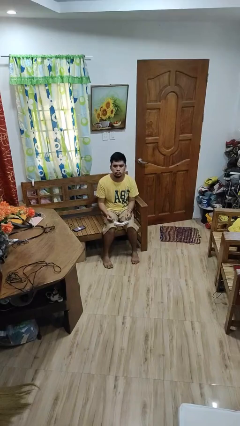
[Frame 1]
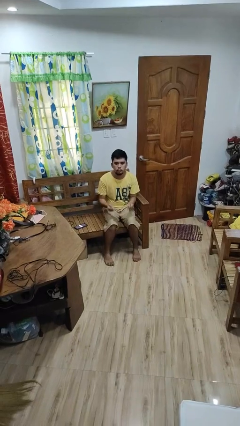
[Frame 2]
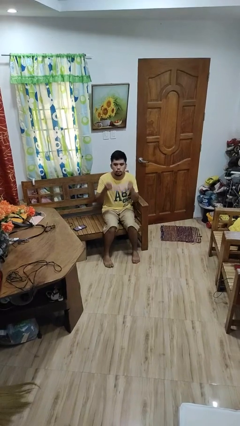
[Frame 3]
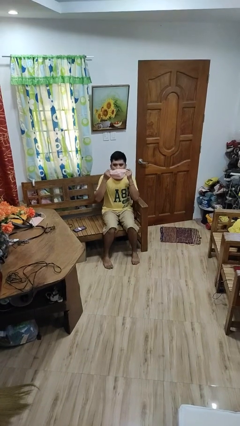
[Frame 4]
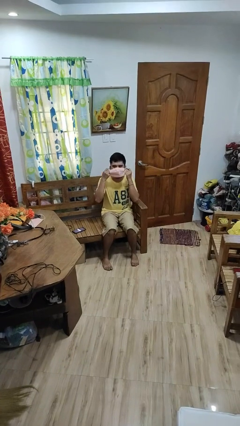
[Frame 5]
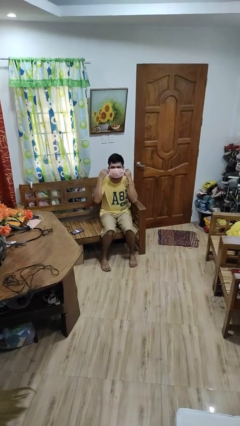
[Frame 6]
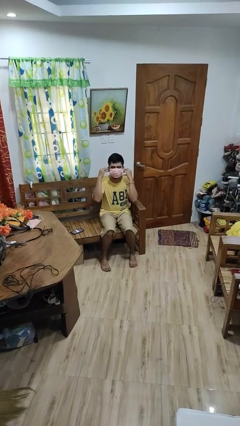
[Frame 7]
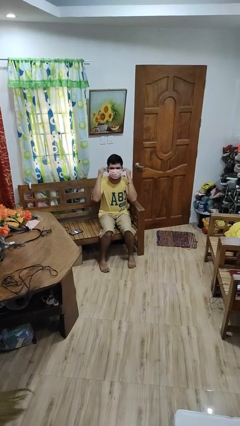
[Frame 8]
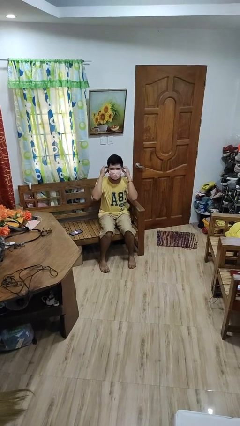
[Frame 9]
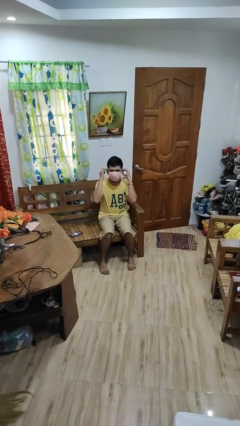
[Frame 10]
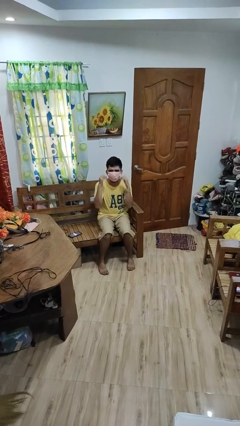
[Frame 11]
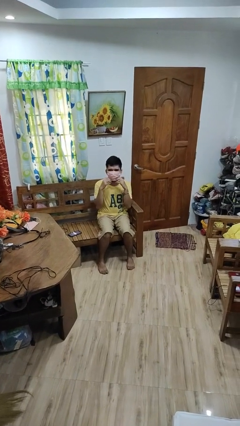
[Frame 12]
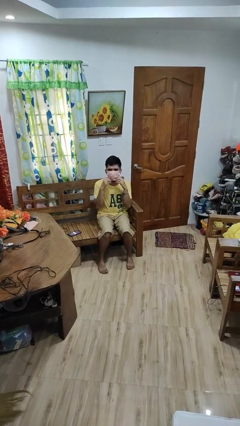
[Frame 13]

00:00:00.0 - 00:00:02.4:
person puts on facemask

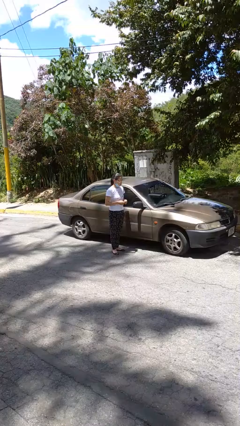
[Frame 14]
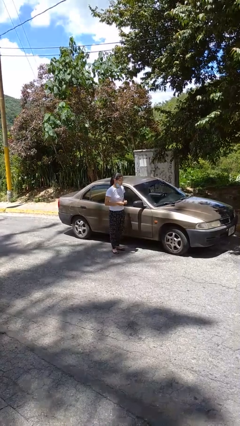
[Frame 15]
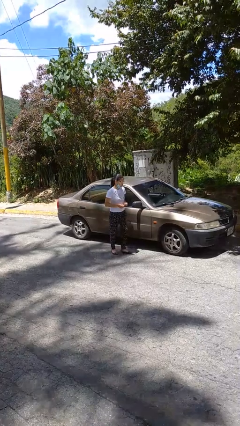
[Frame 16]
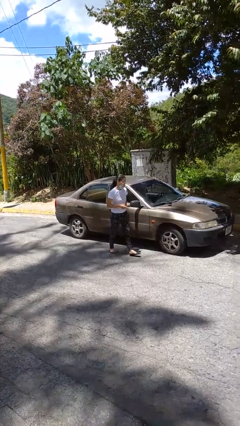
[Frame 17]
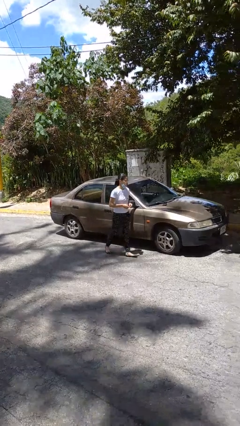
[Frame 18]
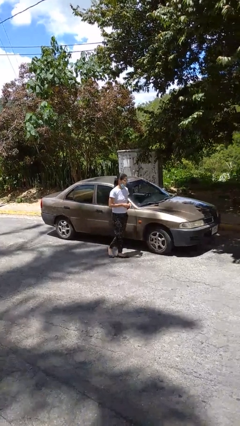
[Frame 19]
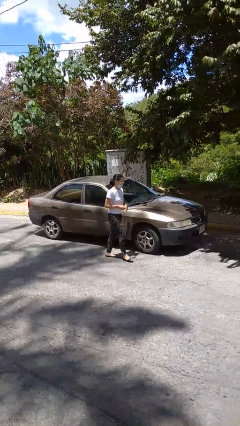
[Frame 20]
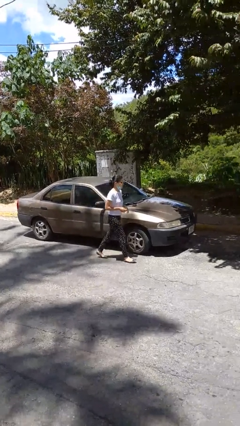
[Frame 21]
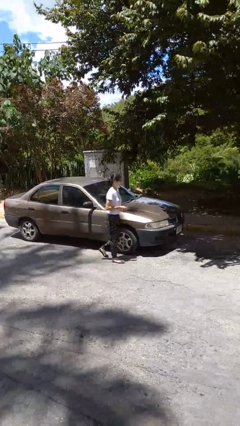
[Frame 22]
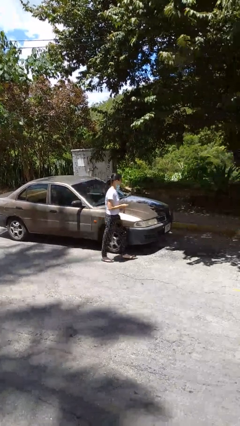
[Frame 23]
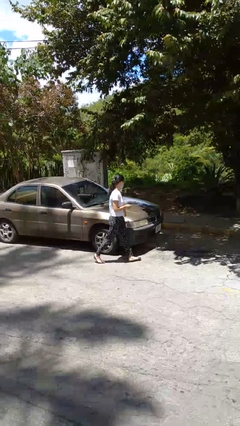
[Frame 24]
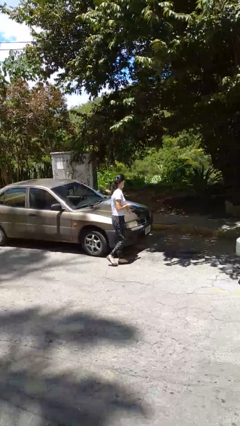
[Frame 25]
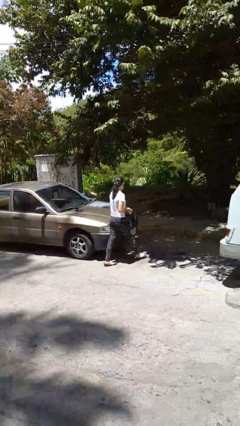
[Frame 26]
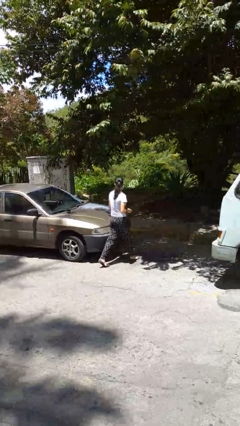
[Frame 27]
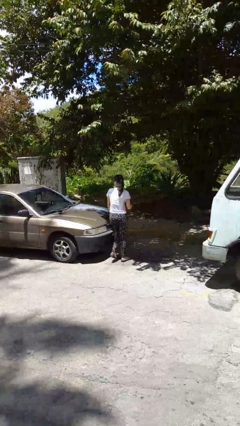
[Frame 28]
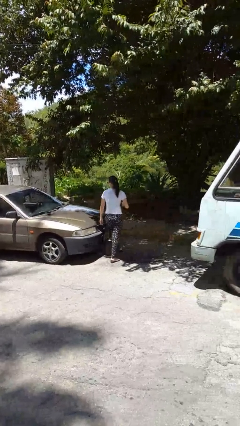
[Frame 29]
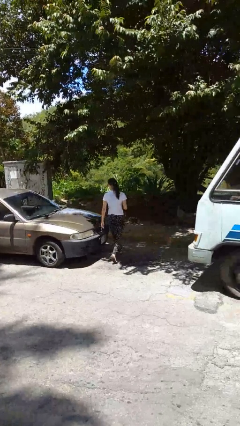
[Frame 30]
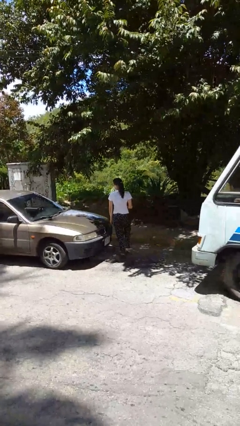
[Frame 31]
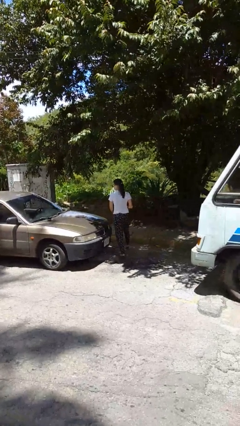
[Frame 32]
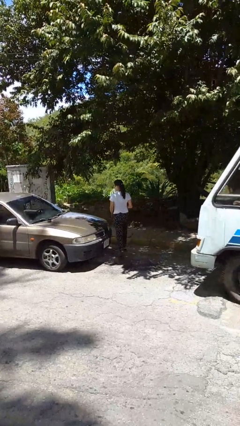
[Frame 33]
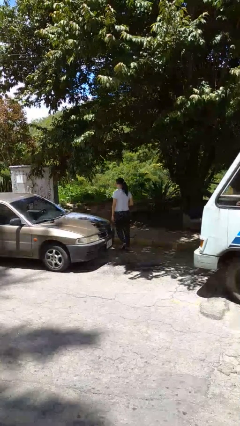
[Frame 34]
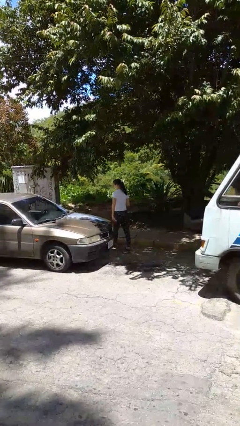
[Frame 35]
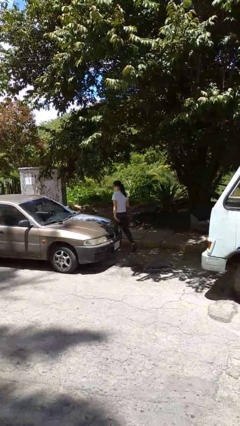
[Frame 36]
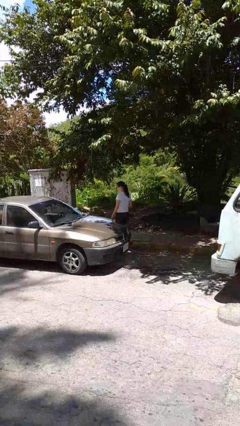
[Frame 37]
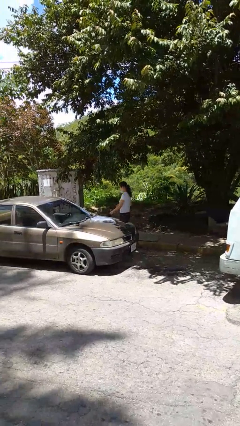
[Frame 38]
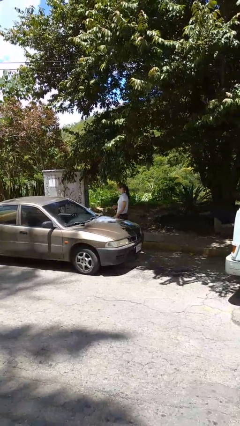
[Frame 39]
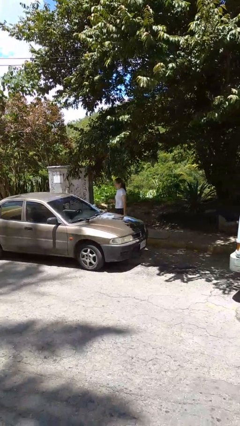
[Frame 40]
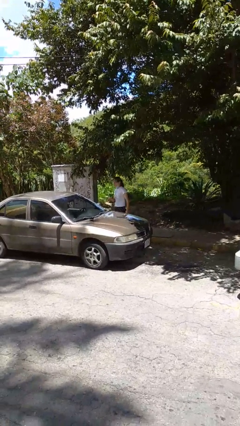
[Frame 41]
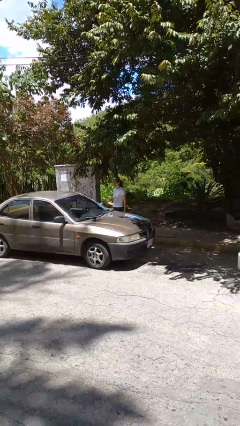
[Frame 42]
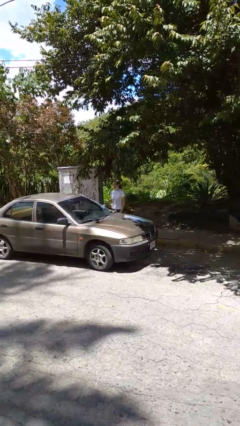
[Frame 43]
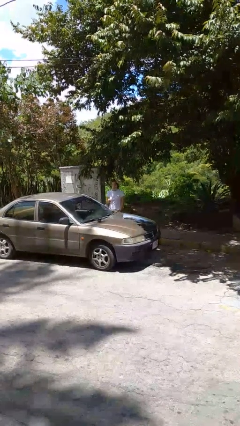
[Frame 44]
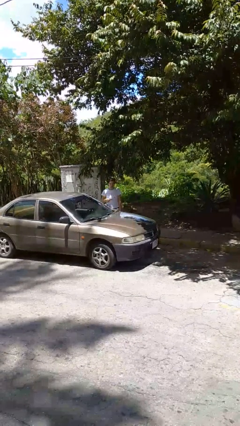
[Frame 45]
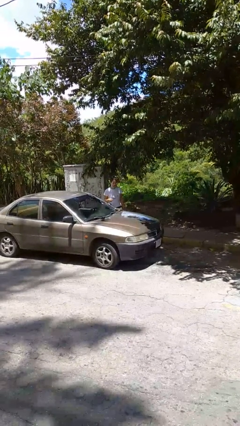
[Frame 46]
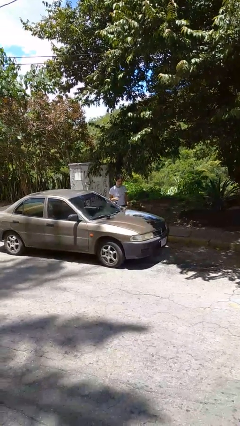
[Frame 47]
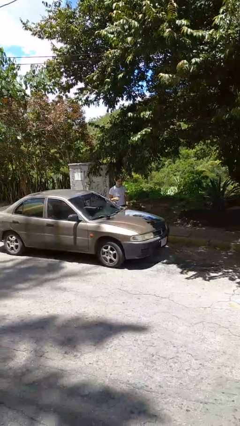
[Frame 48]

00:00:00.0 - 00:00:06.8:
person walks around car

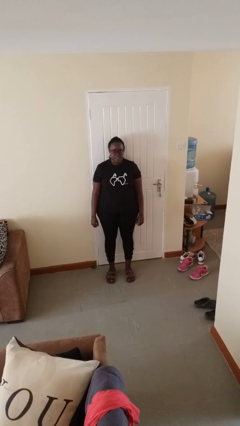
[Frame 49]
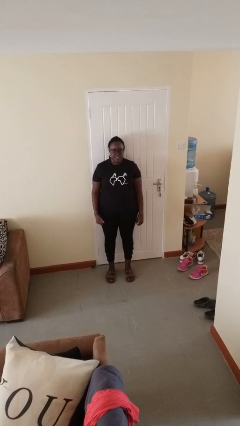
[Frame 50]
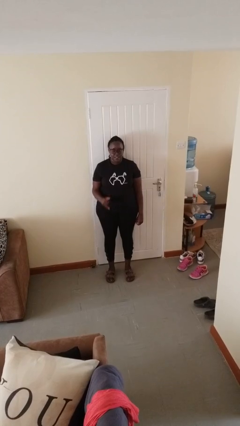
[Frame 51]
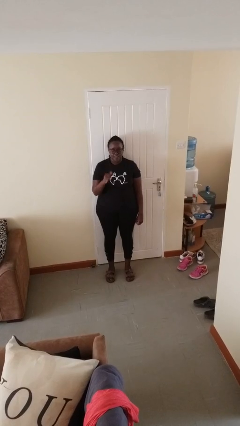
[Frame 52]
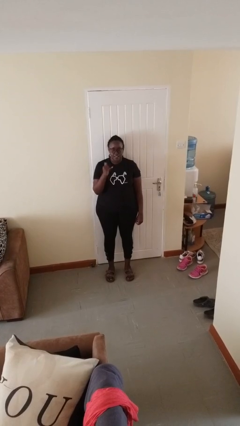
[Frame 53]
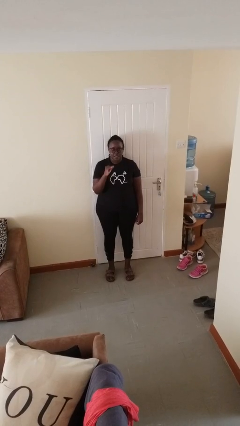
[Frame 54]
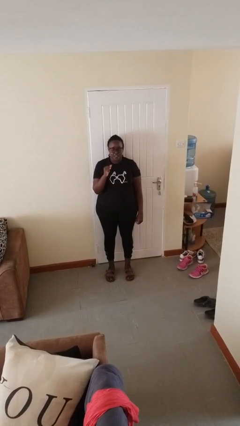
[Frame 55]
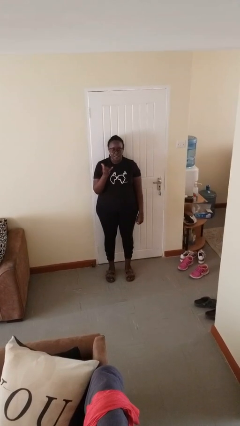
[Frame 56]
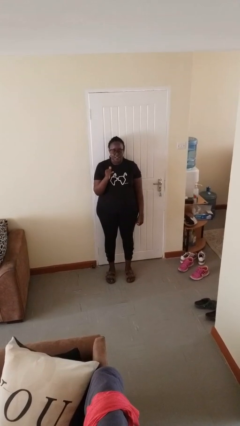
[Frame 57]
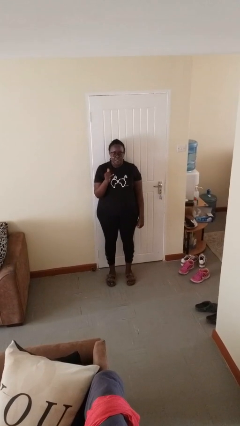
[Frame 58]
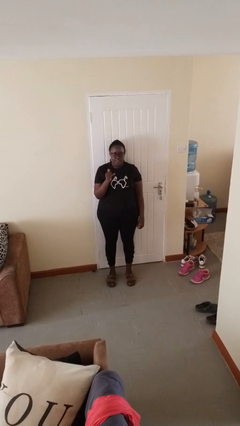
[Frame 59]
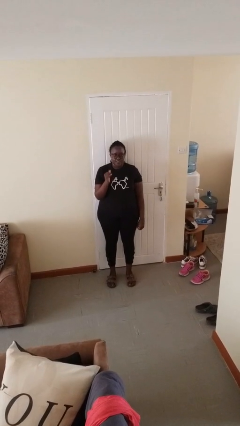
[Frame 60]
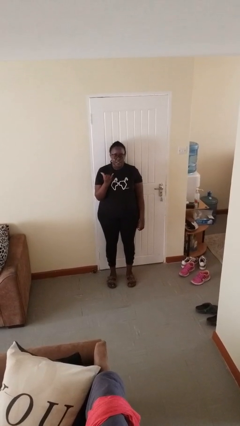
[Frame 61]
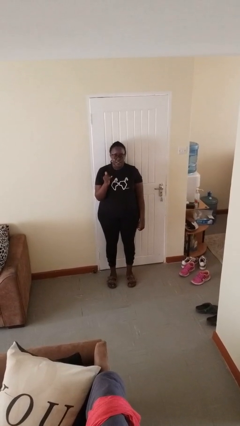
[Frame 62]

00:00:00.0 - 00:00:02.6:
person gestures hang loose

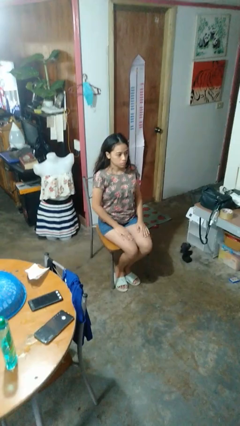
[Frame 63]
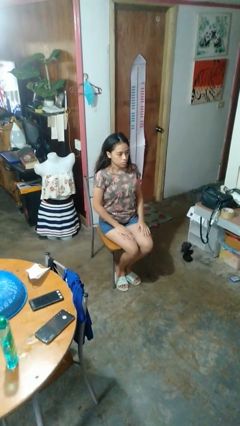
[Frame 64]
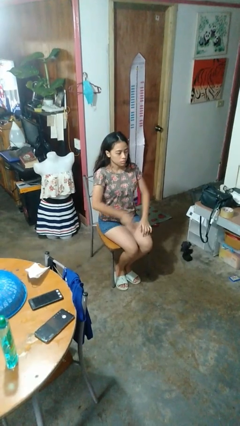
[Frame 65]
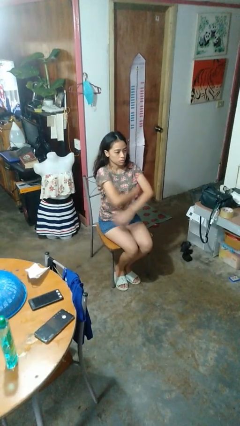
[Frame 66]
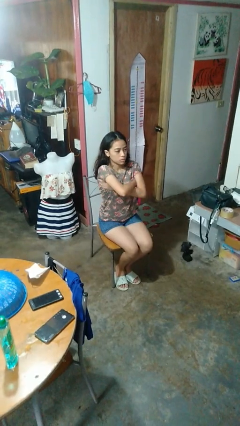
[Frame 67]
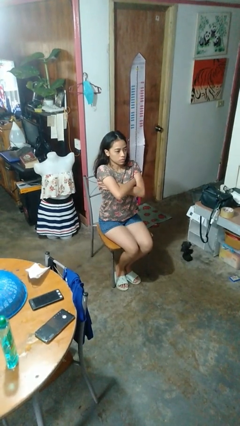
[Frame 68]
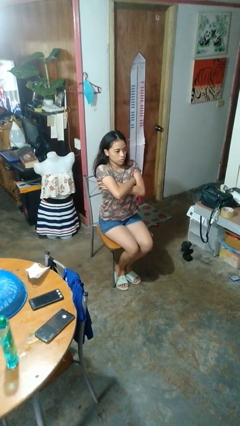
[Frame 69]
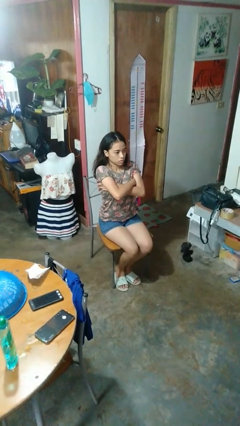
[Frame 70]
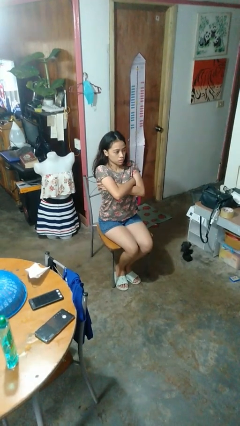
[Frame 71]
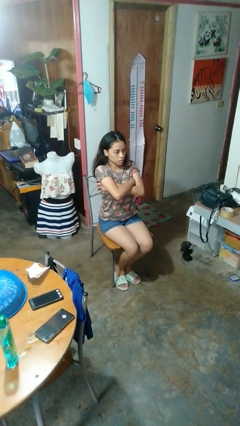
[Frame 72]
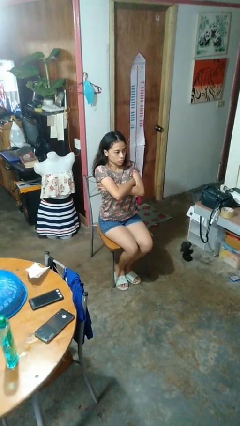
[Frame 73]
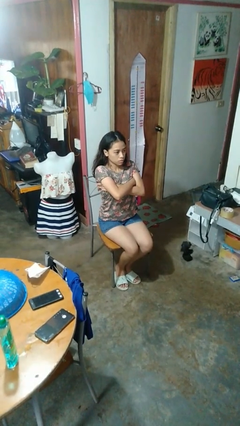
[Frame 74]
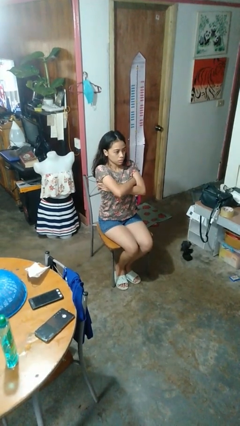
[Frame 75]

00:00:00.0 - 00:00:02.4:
person crosses arms

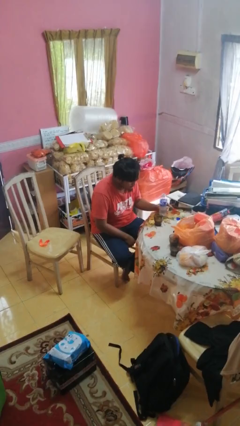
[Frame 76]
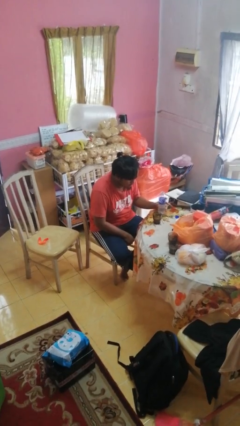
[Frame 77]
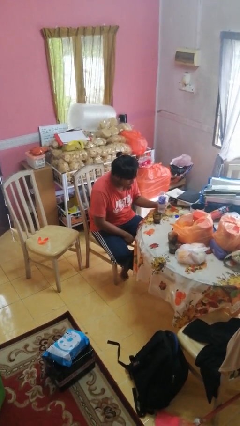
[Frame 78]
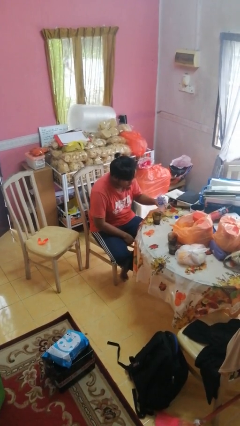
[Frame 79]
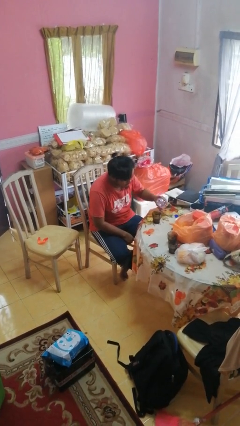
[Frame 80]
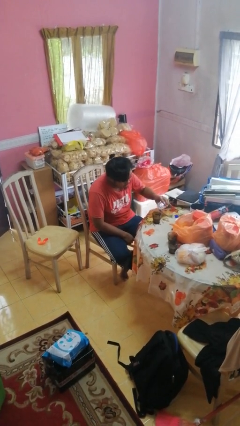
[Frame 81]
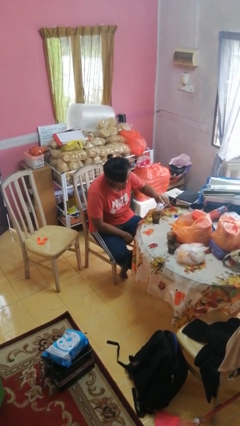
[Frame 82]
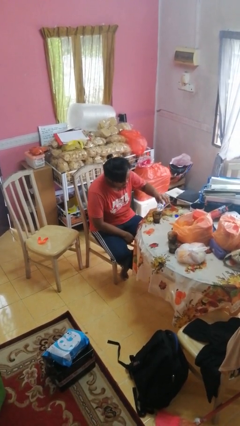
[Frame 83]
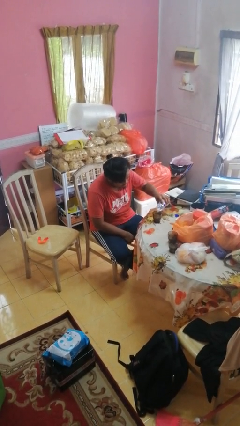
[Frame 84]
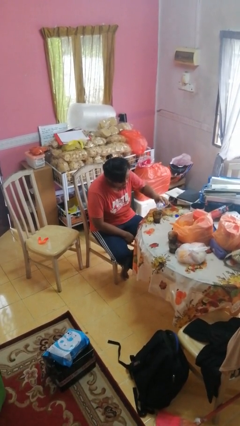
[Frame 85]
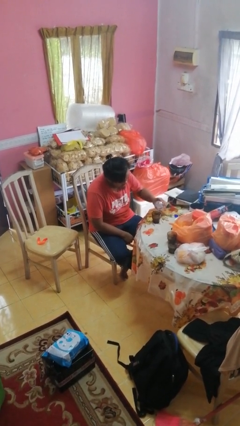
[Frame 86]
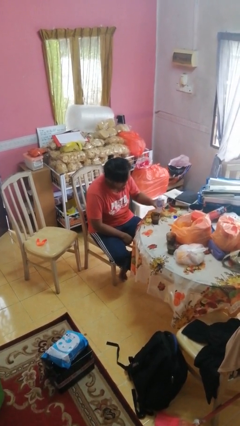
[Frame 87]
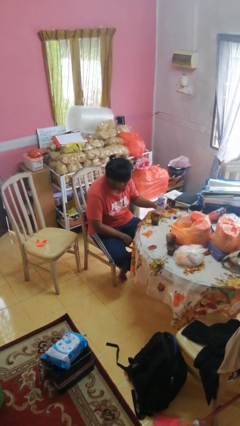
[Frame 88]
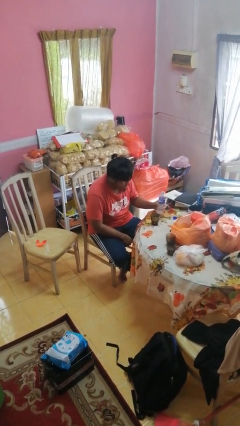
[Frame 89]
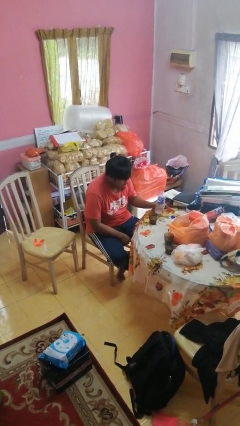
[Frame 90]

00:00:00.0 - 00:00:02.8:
person pours liquid into cup

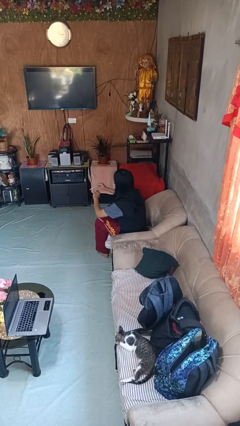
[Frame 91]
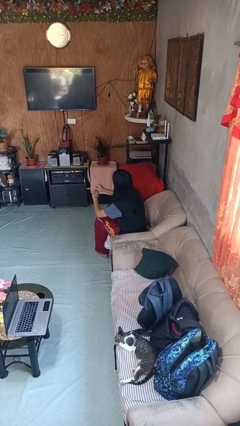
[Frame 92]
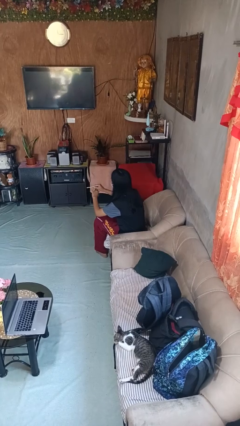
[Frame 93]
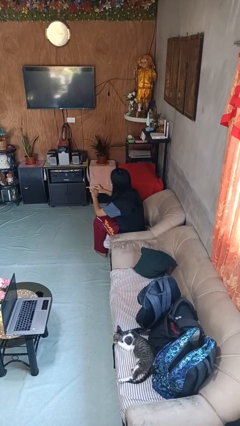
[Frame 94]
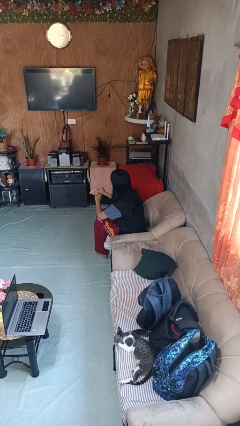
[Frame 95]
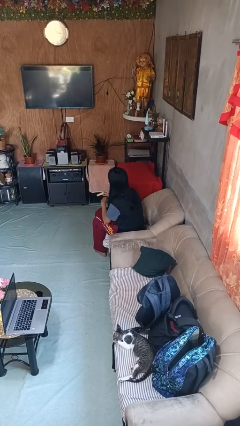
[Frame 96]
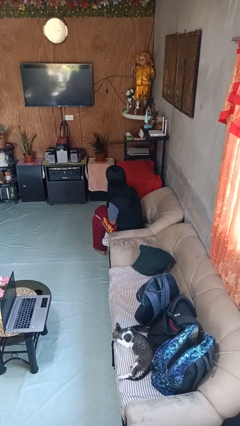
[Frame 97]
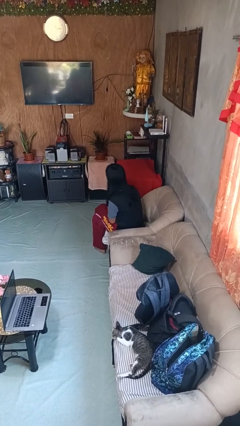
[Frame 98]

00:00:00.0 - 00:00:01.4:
person files fingernails
